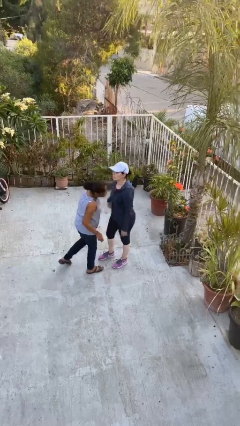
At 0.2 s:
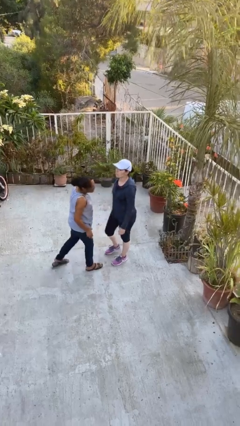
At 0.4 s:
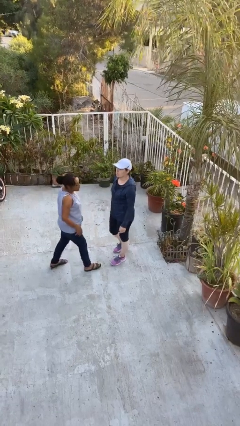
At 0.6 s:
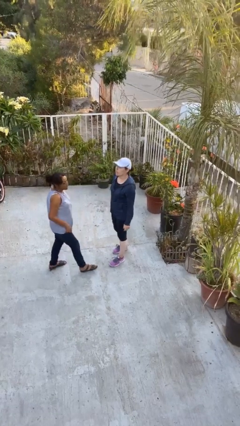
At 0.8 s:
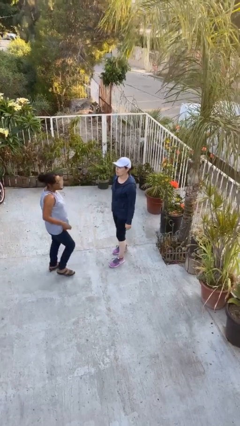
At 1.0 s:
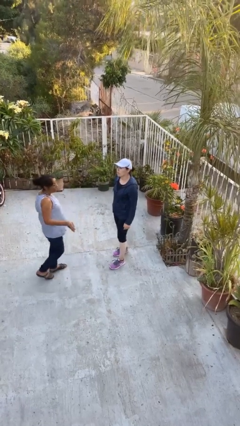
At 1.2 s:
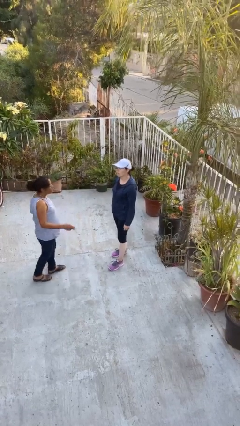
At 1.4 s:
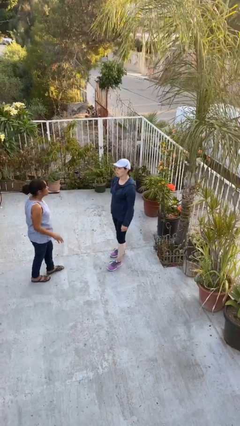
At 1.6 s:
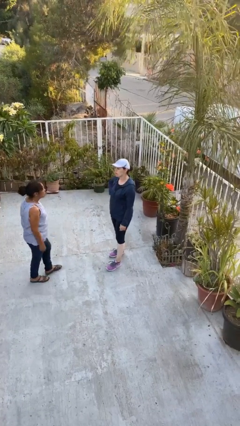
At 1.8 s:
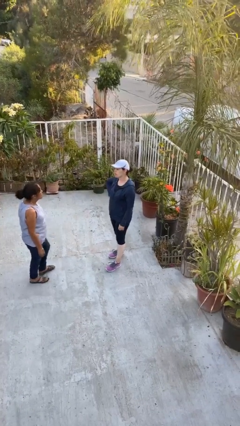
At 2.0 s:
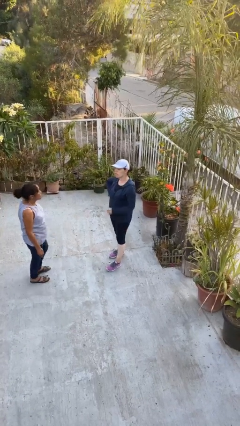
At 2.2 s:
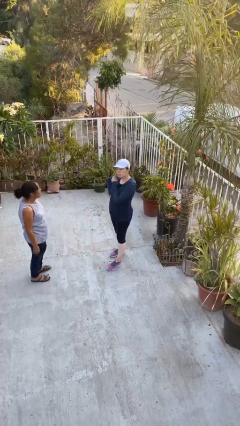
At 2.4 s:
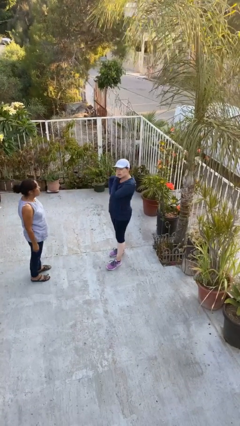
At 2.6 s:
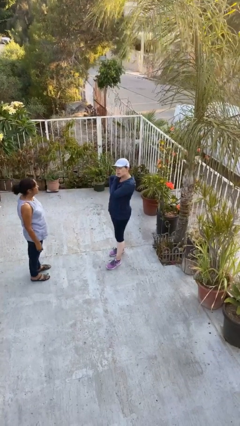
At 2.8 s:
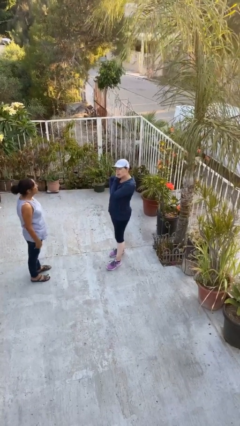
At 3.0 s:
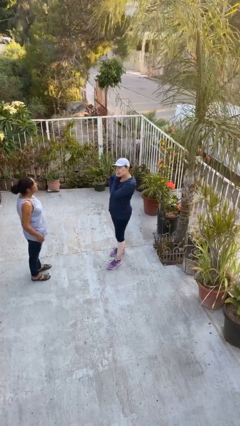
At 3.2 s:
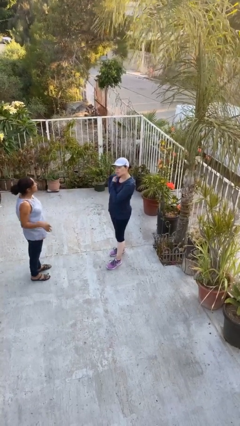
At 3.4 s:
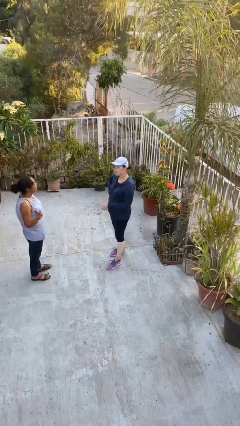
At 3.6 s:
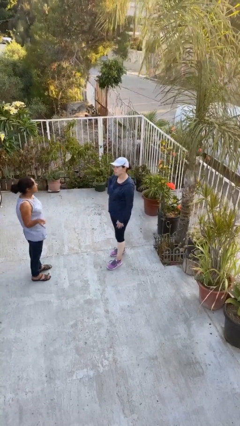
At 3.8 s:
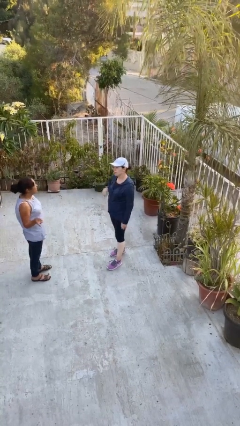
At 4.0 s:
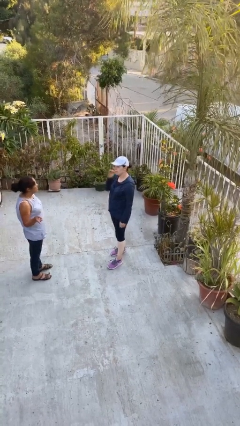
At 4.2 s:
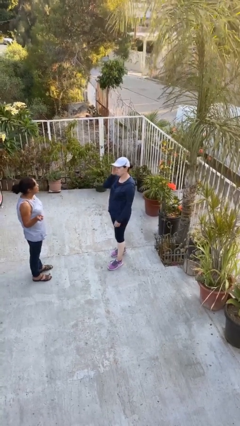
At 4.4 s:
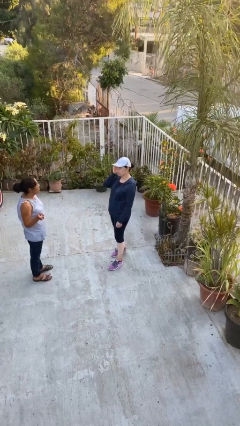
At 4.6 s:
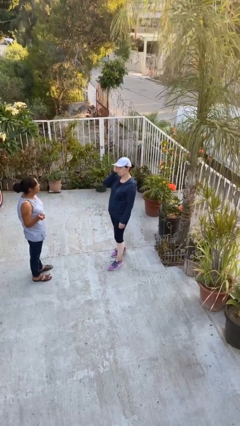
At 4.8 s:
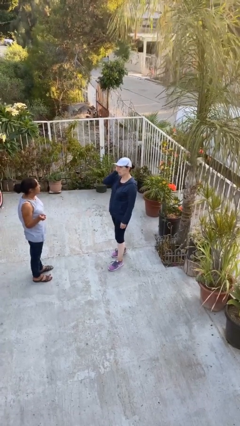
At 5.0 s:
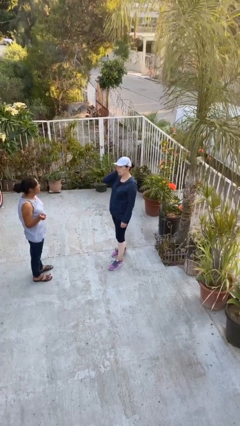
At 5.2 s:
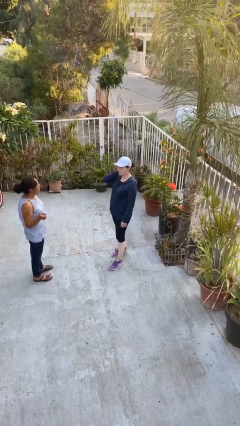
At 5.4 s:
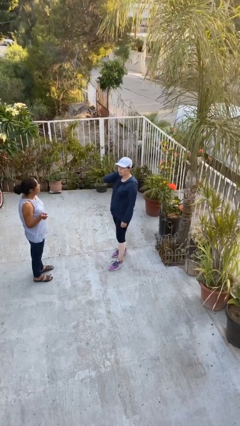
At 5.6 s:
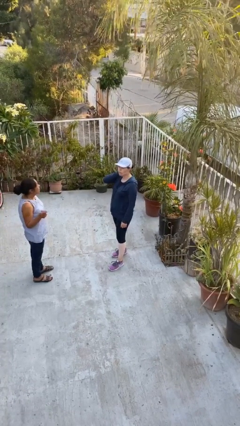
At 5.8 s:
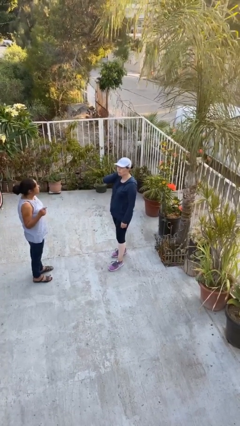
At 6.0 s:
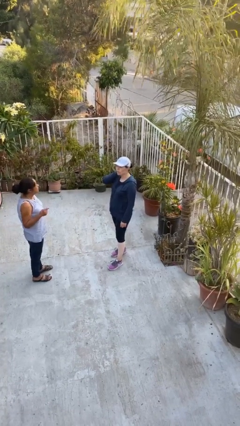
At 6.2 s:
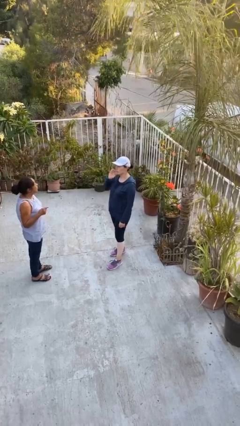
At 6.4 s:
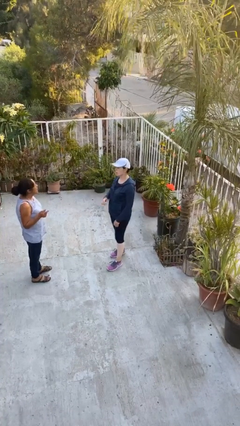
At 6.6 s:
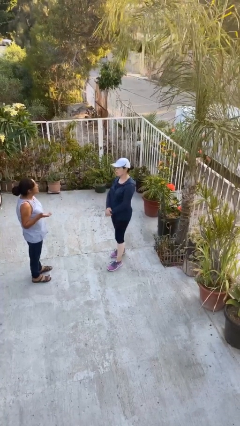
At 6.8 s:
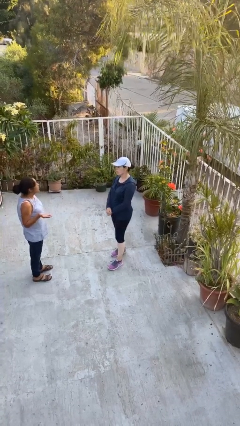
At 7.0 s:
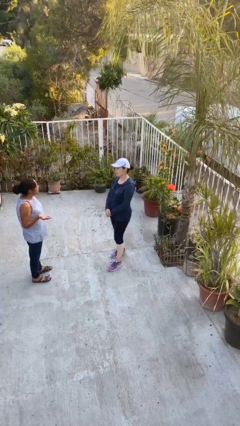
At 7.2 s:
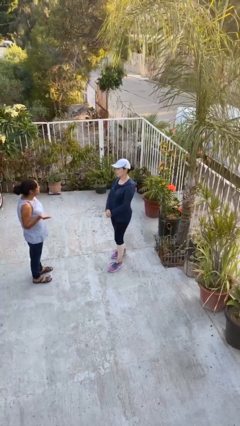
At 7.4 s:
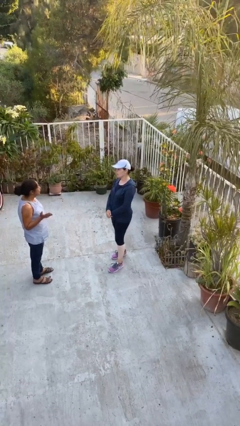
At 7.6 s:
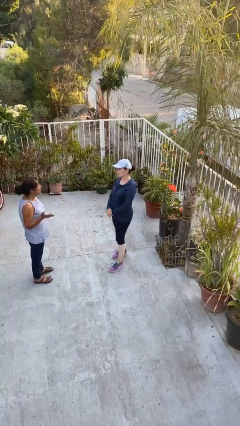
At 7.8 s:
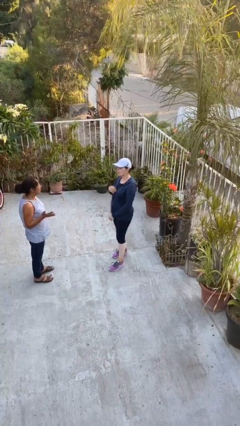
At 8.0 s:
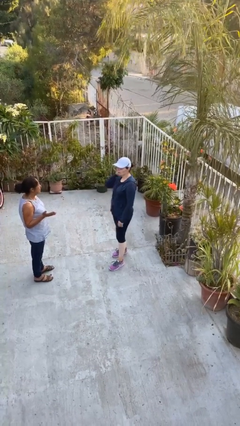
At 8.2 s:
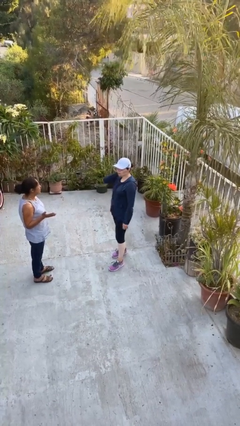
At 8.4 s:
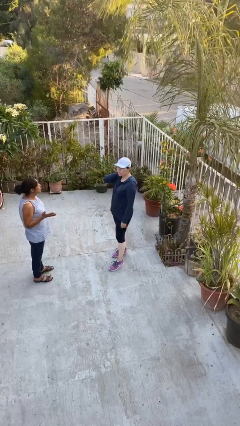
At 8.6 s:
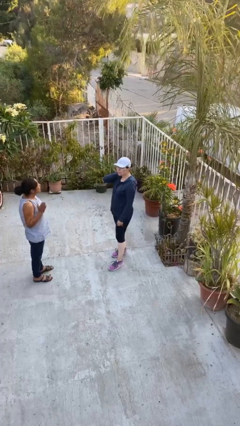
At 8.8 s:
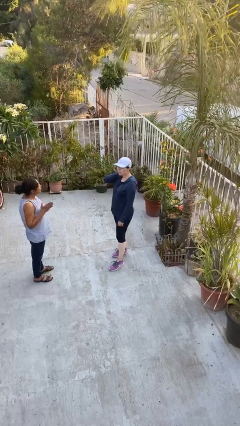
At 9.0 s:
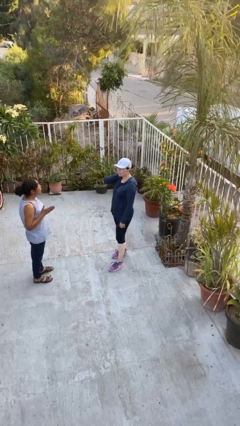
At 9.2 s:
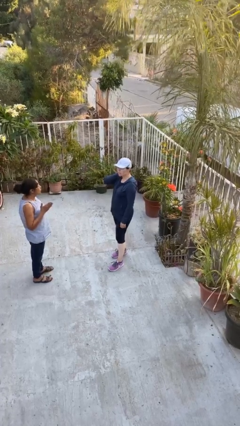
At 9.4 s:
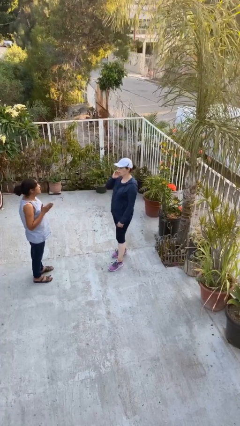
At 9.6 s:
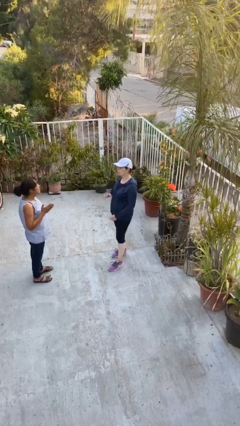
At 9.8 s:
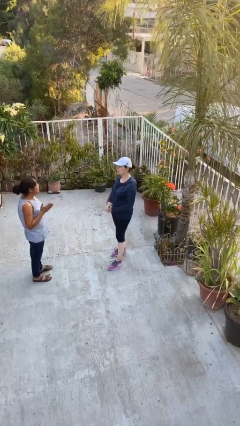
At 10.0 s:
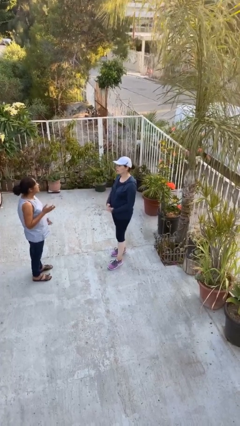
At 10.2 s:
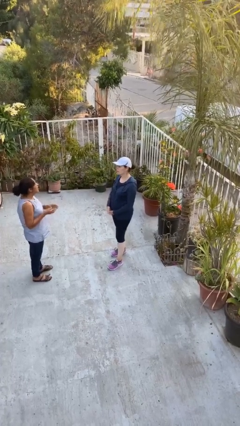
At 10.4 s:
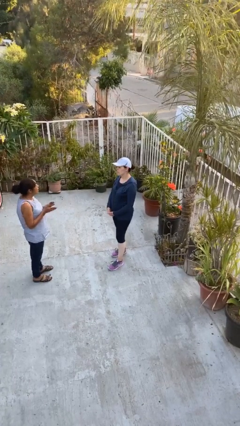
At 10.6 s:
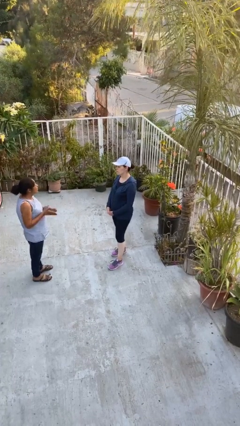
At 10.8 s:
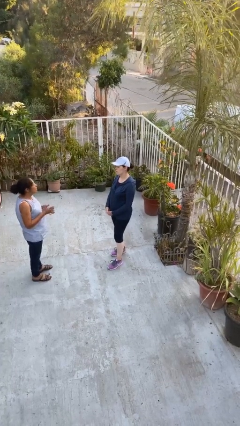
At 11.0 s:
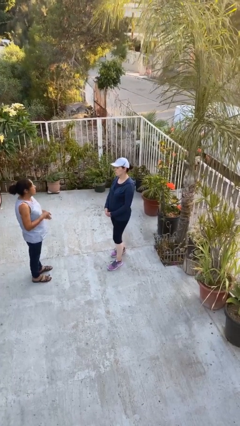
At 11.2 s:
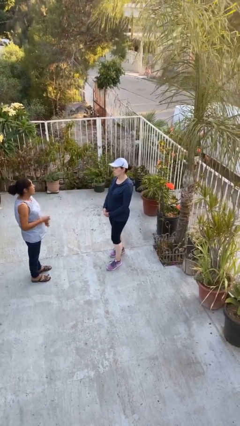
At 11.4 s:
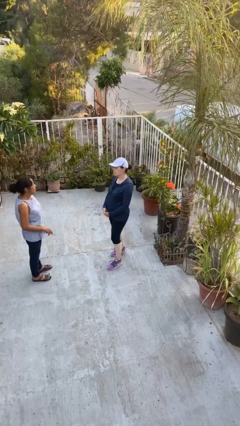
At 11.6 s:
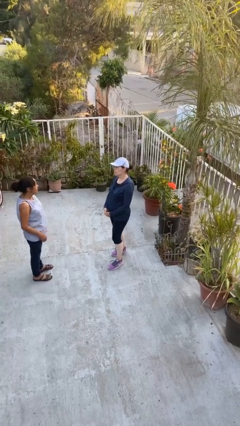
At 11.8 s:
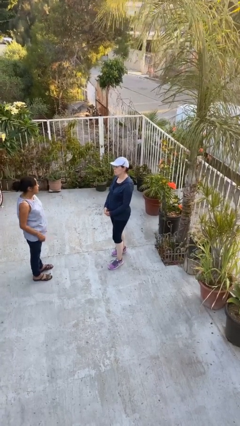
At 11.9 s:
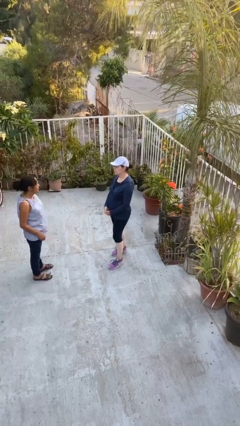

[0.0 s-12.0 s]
person talks to person

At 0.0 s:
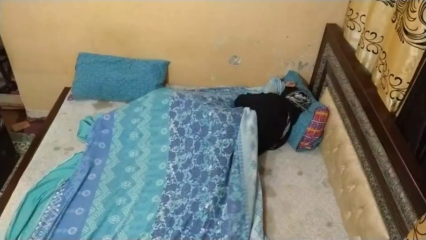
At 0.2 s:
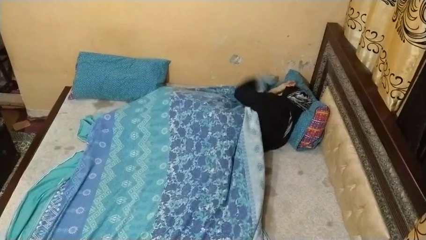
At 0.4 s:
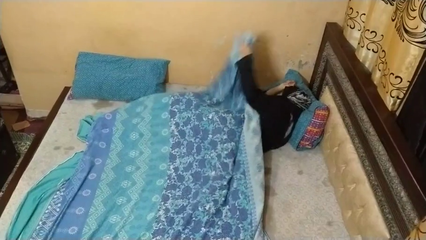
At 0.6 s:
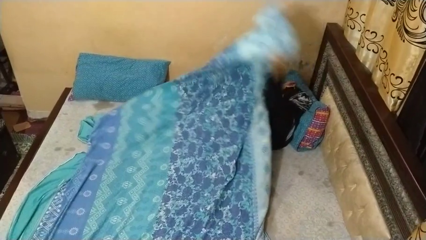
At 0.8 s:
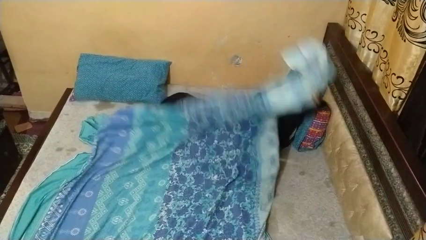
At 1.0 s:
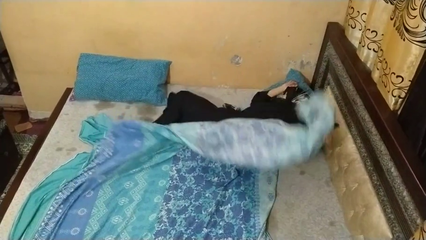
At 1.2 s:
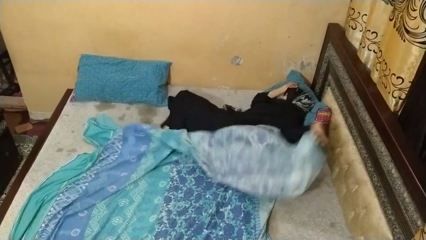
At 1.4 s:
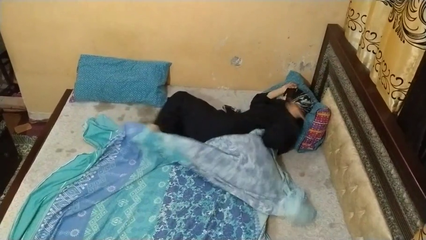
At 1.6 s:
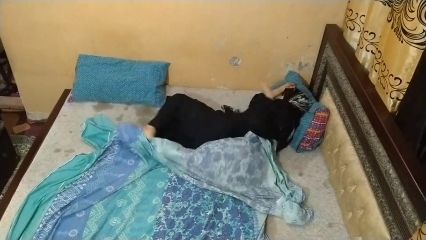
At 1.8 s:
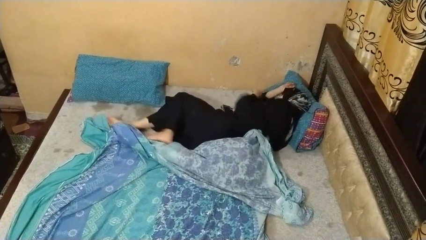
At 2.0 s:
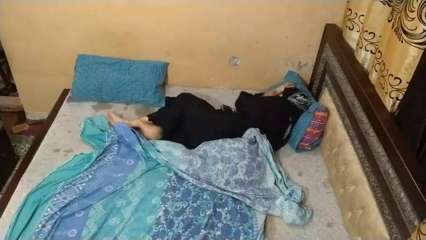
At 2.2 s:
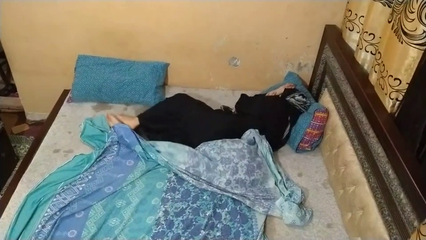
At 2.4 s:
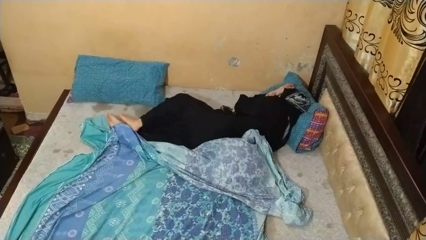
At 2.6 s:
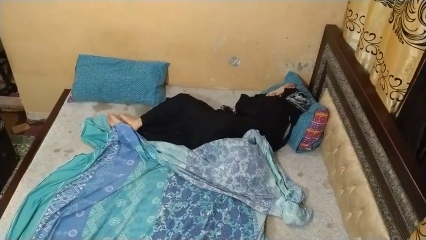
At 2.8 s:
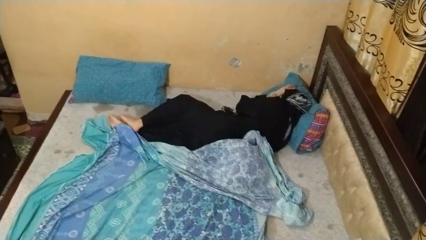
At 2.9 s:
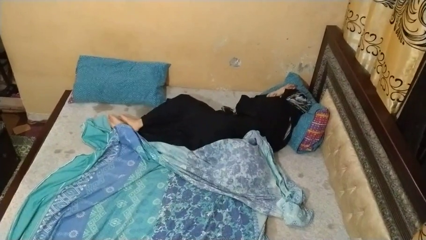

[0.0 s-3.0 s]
person uncovers with bedsheets

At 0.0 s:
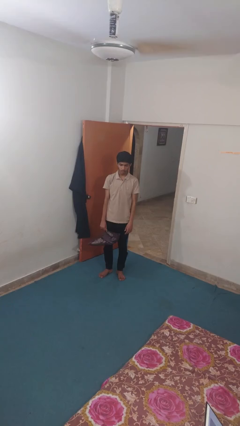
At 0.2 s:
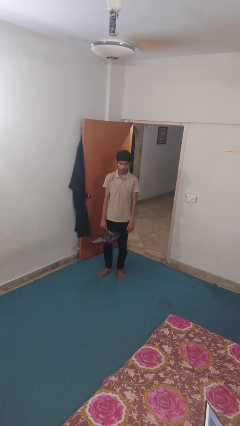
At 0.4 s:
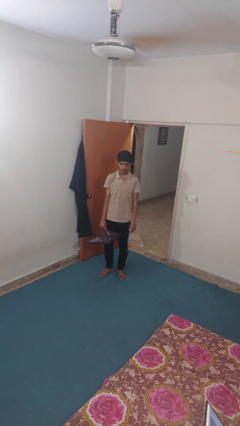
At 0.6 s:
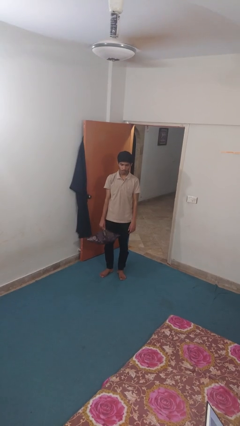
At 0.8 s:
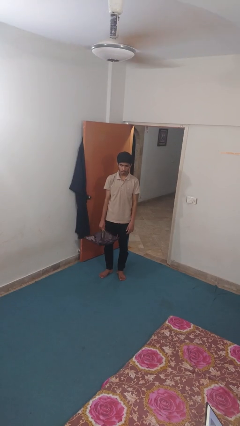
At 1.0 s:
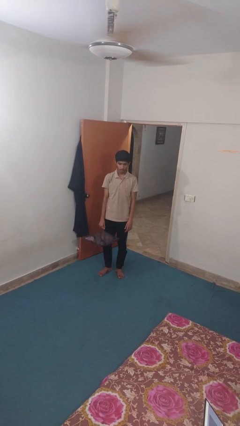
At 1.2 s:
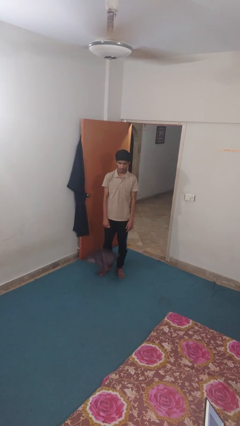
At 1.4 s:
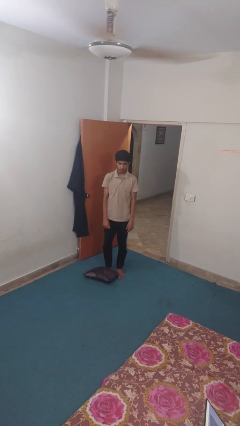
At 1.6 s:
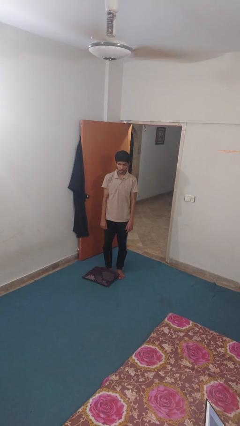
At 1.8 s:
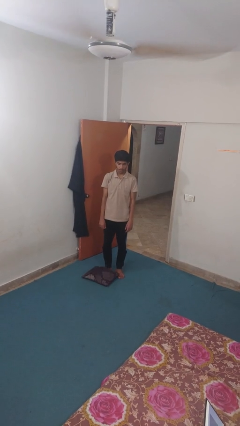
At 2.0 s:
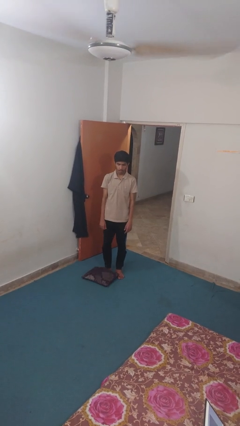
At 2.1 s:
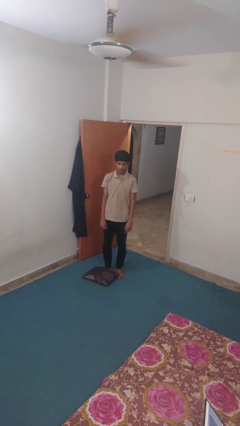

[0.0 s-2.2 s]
person drops object

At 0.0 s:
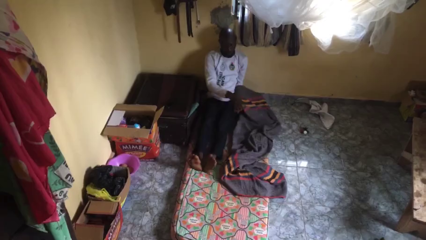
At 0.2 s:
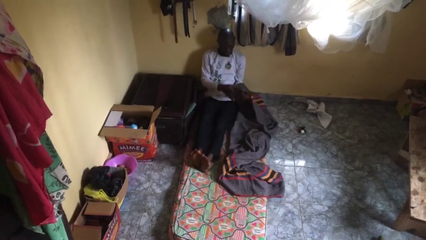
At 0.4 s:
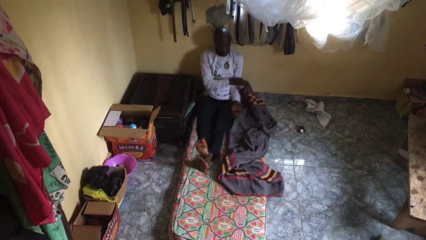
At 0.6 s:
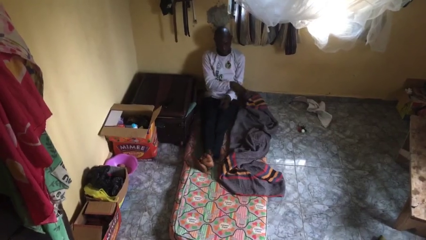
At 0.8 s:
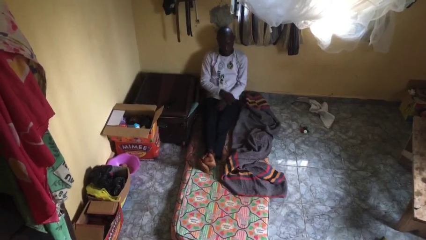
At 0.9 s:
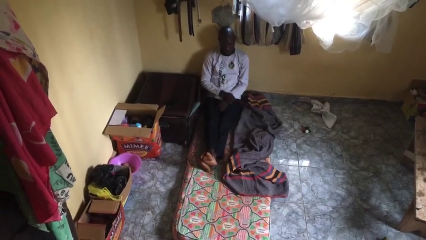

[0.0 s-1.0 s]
person uncovers with blanket
